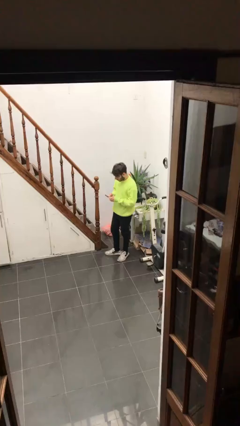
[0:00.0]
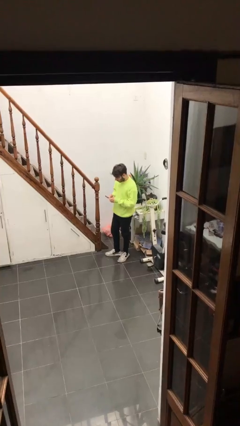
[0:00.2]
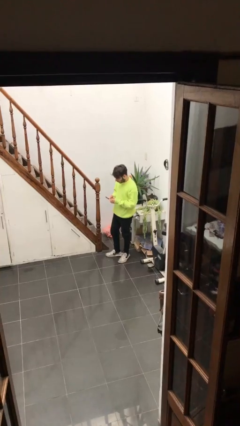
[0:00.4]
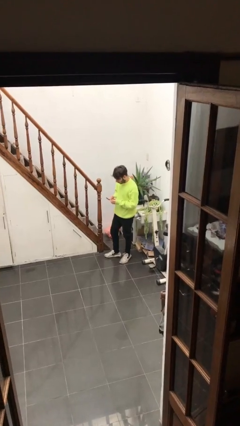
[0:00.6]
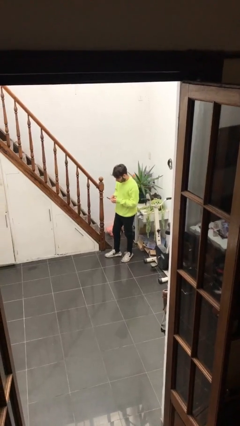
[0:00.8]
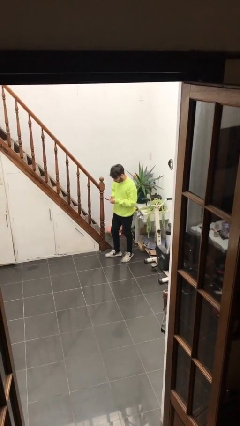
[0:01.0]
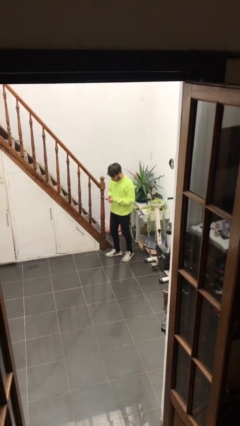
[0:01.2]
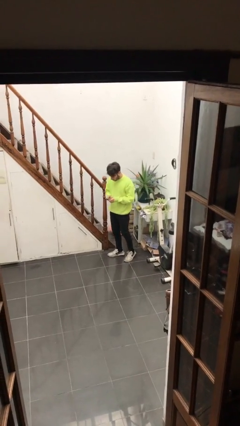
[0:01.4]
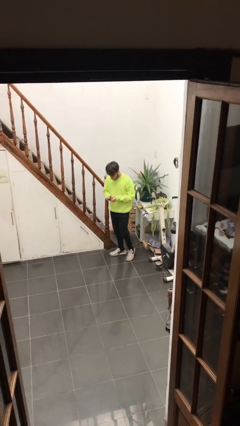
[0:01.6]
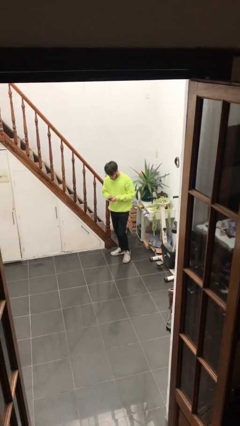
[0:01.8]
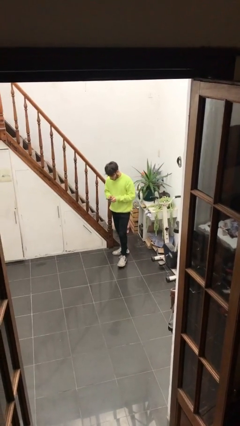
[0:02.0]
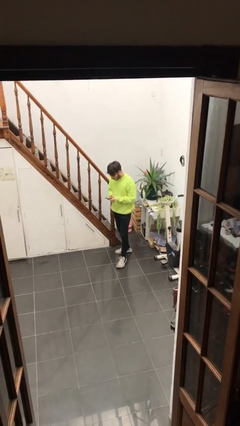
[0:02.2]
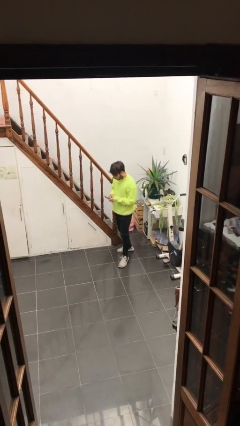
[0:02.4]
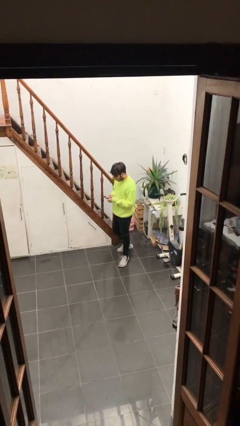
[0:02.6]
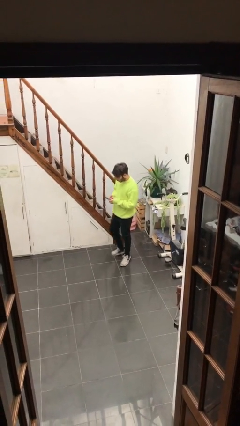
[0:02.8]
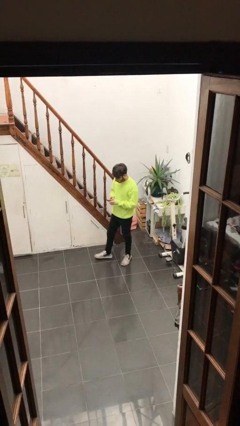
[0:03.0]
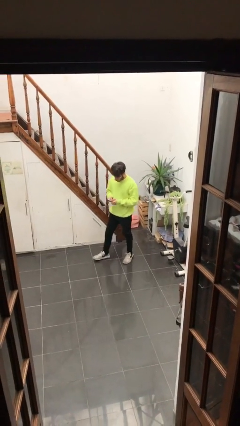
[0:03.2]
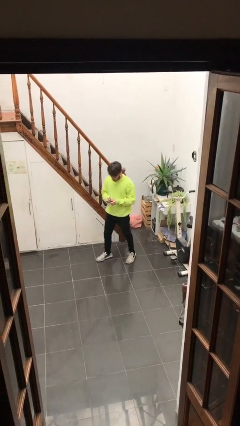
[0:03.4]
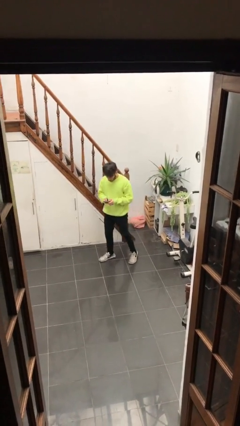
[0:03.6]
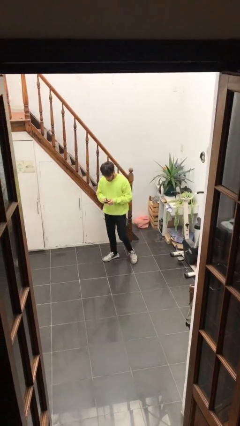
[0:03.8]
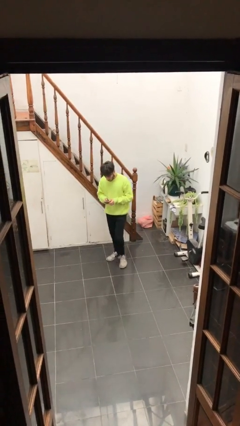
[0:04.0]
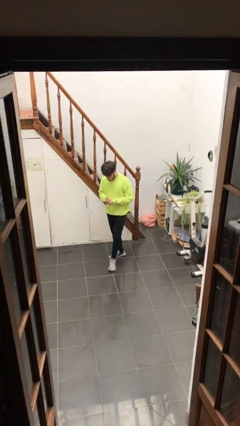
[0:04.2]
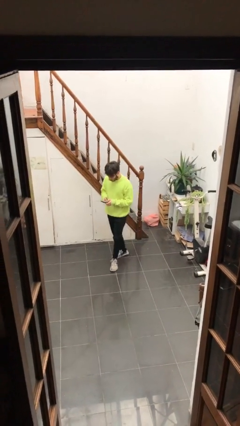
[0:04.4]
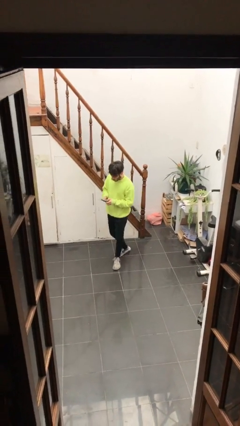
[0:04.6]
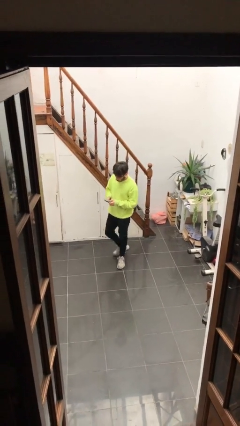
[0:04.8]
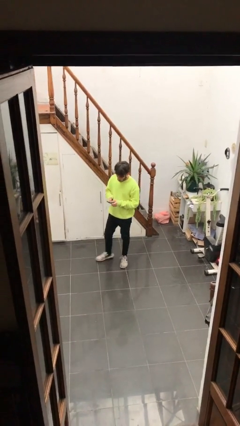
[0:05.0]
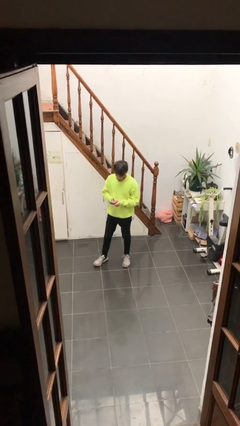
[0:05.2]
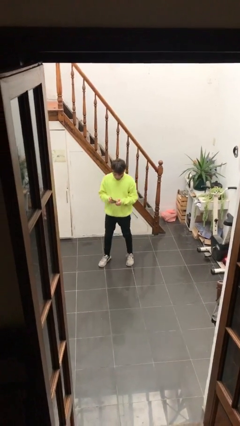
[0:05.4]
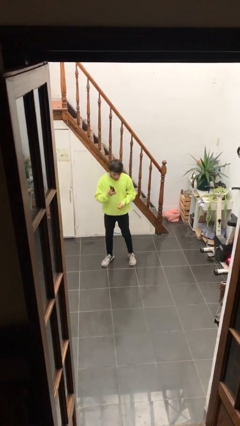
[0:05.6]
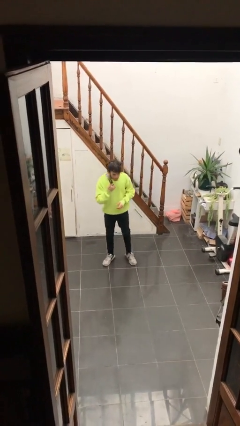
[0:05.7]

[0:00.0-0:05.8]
person texts on phone

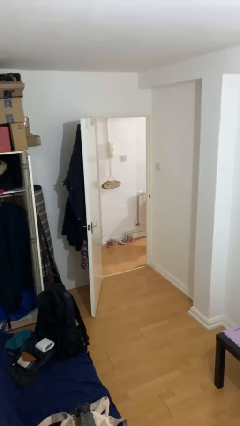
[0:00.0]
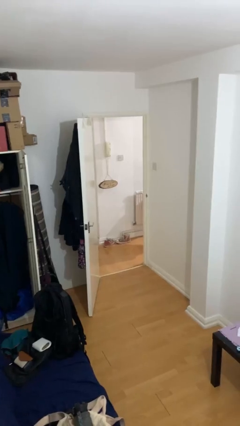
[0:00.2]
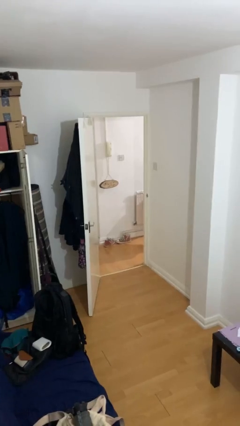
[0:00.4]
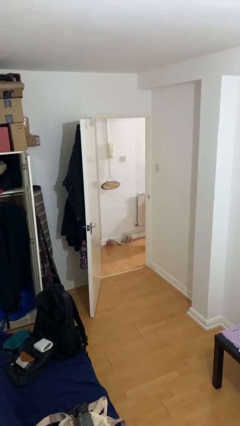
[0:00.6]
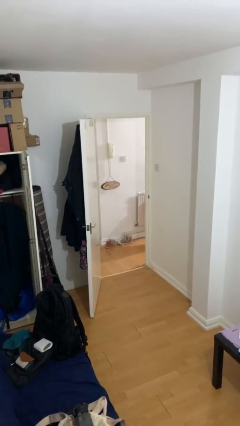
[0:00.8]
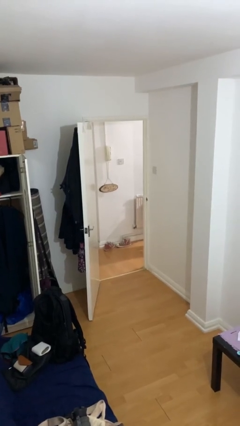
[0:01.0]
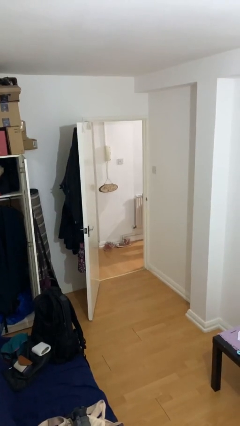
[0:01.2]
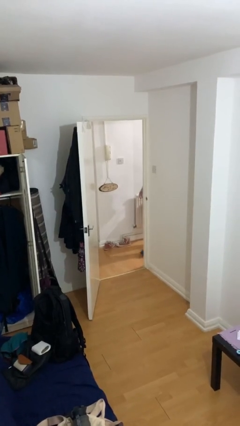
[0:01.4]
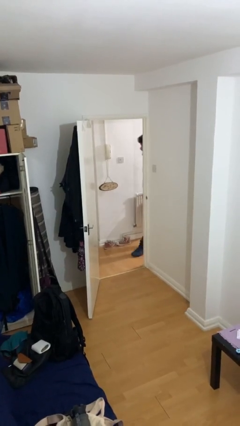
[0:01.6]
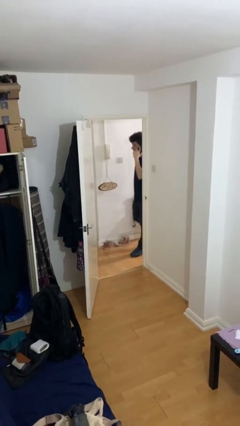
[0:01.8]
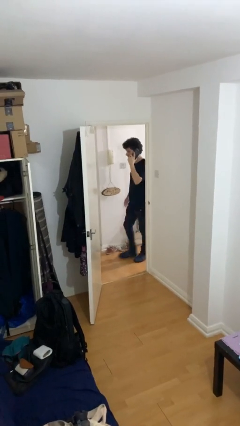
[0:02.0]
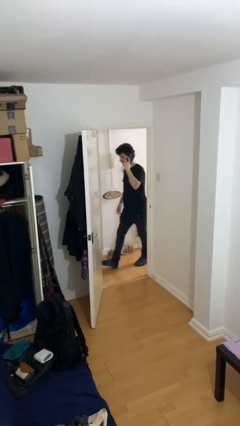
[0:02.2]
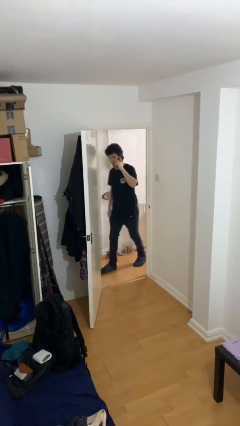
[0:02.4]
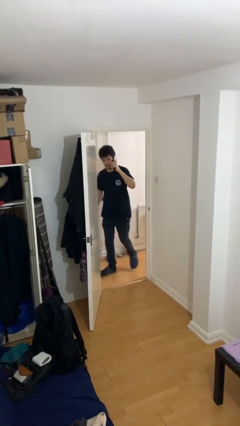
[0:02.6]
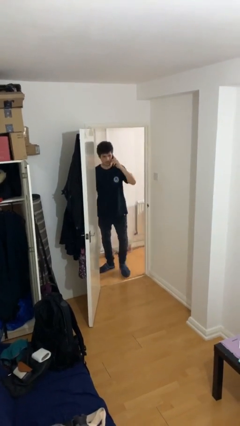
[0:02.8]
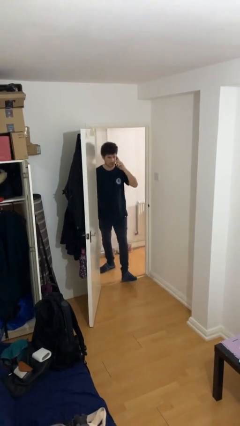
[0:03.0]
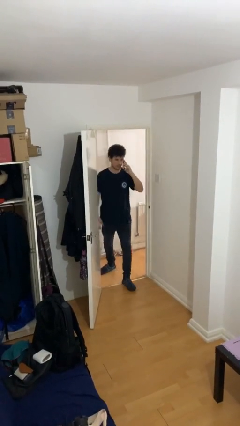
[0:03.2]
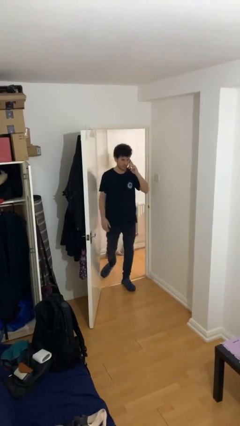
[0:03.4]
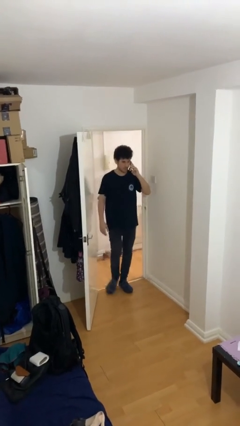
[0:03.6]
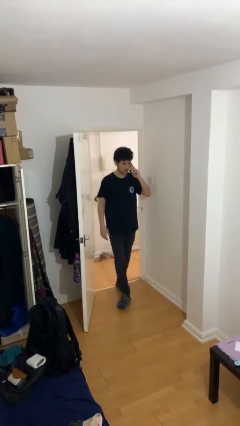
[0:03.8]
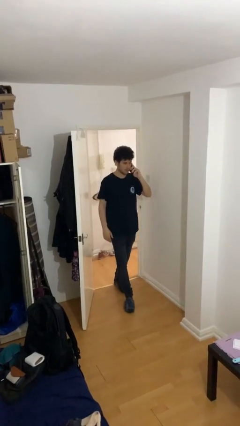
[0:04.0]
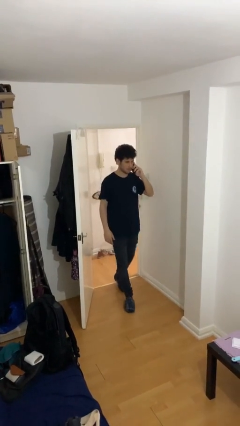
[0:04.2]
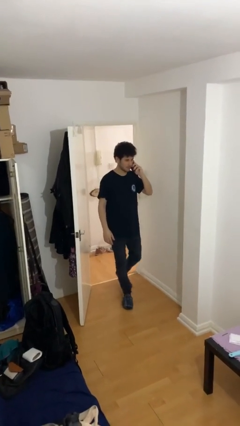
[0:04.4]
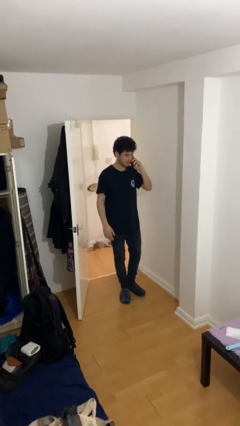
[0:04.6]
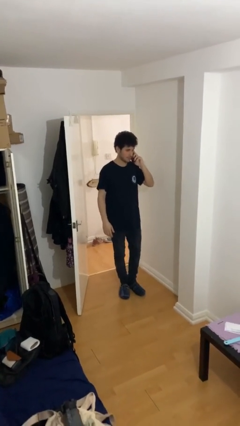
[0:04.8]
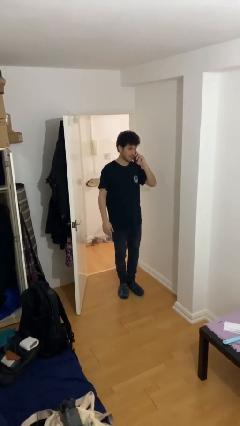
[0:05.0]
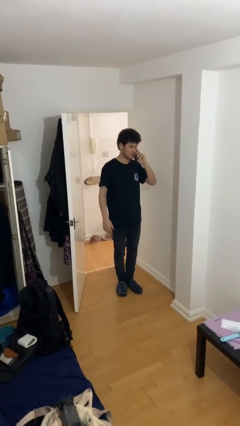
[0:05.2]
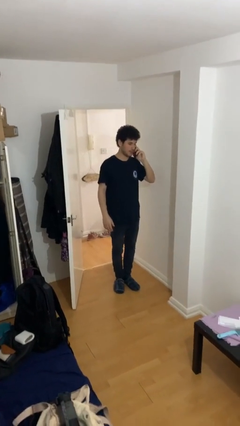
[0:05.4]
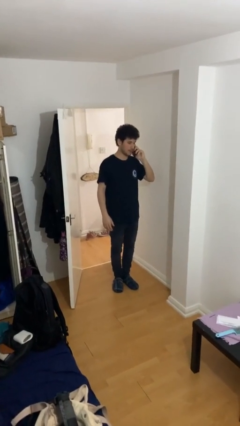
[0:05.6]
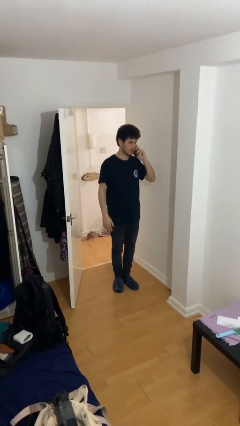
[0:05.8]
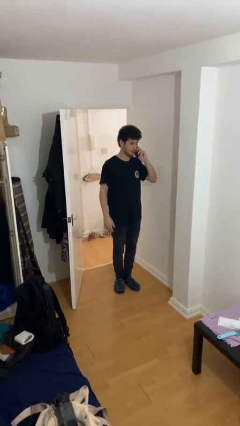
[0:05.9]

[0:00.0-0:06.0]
person enters scene through structure

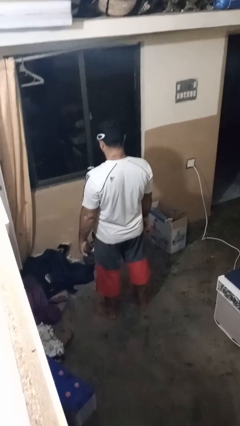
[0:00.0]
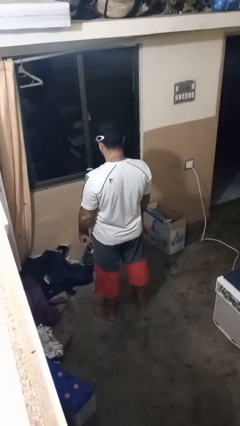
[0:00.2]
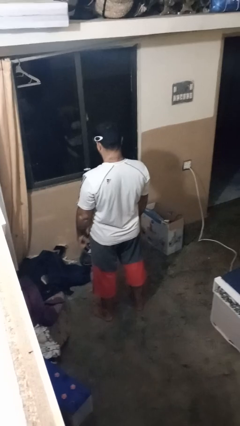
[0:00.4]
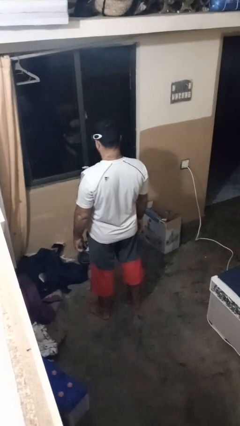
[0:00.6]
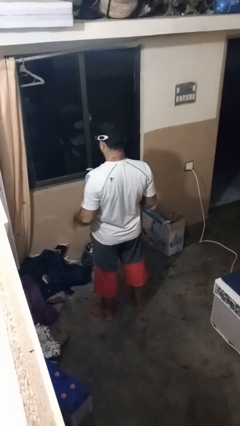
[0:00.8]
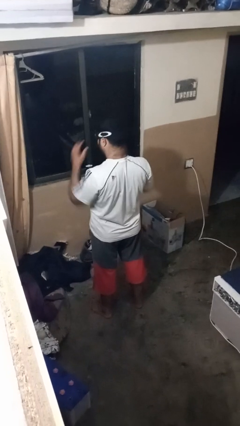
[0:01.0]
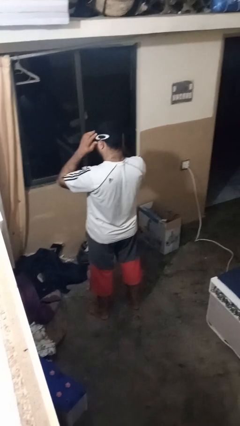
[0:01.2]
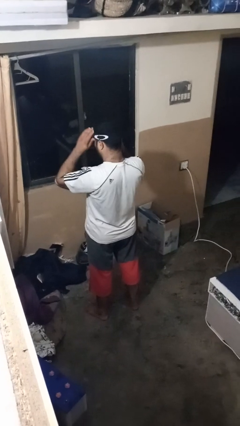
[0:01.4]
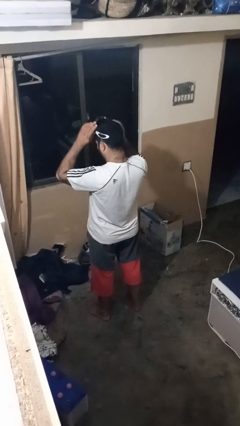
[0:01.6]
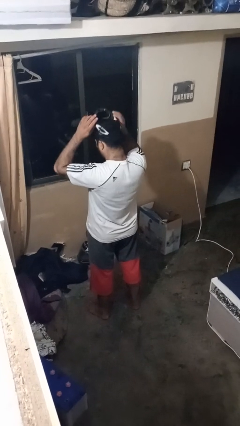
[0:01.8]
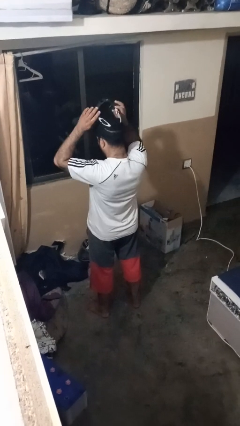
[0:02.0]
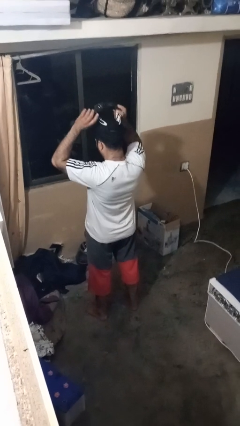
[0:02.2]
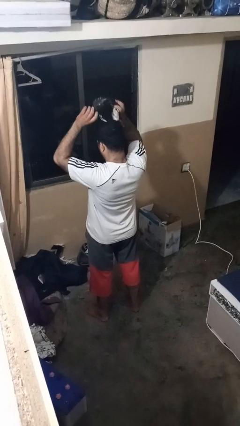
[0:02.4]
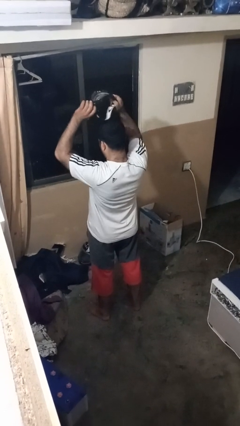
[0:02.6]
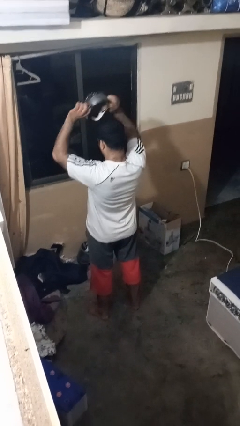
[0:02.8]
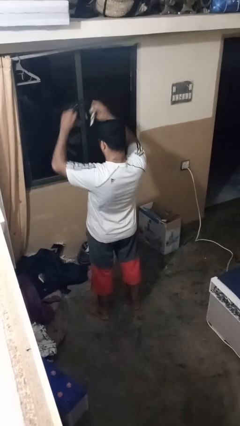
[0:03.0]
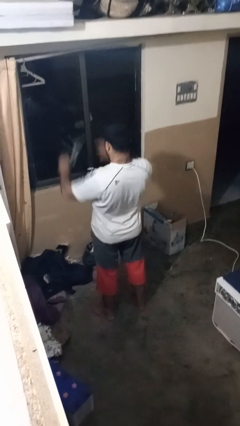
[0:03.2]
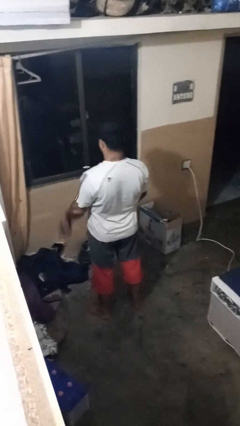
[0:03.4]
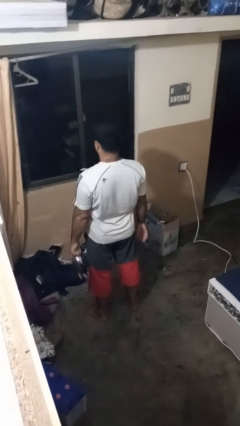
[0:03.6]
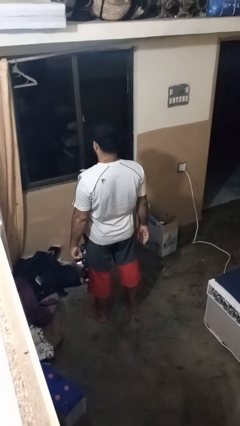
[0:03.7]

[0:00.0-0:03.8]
person takes off sunglasses

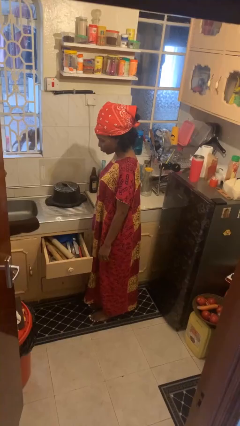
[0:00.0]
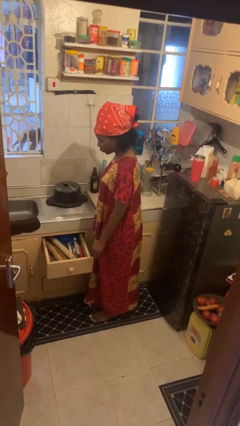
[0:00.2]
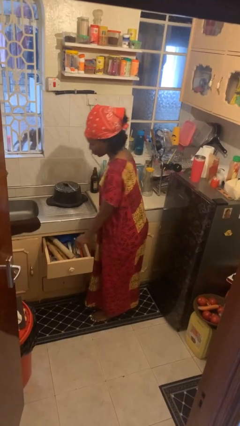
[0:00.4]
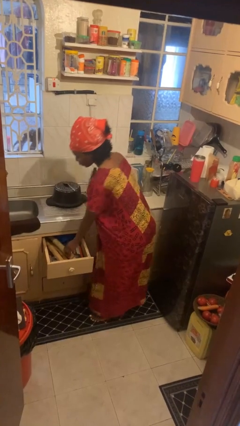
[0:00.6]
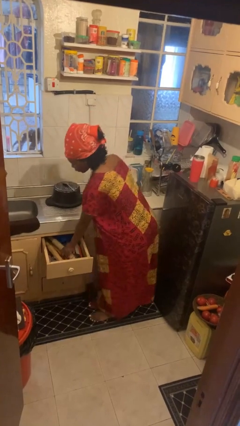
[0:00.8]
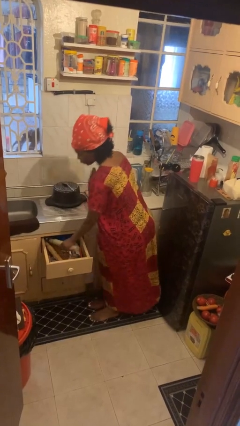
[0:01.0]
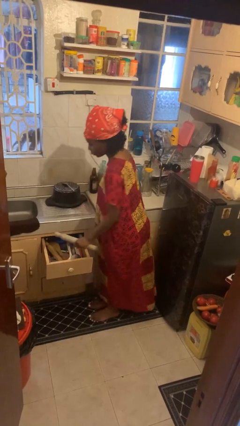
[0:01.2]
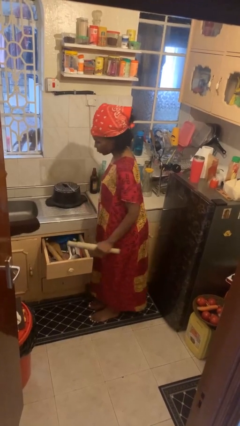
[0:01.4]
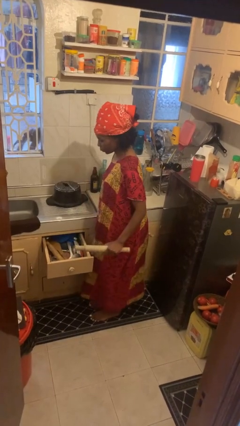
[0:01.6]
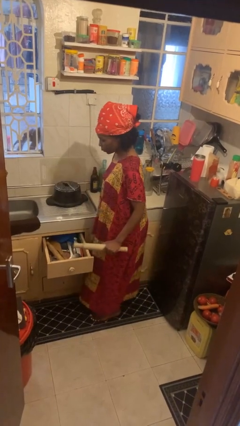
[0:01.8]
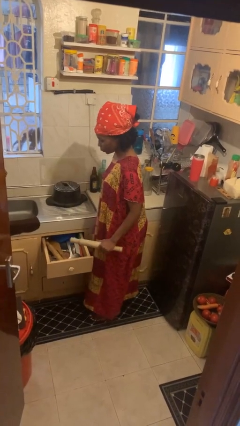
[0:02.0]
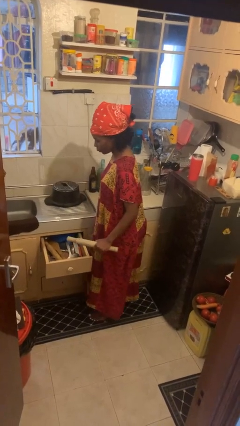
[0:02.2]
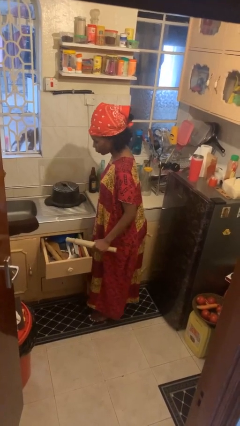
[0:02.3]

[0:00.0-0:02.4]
person takes object from kitchen drawer
